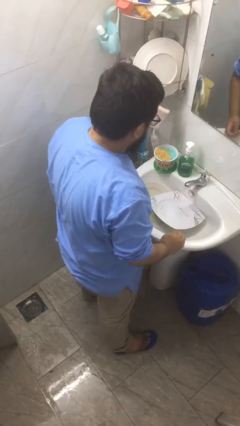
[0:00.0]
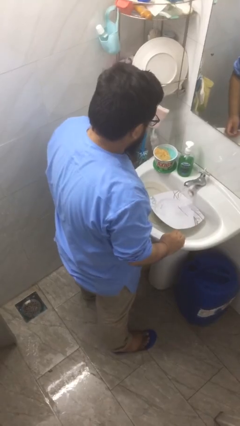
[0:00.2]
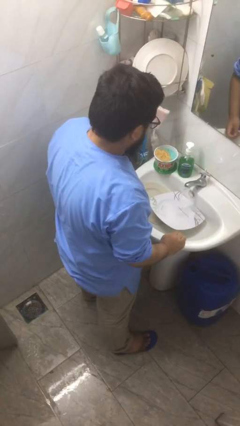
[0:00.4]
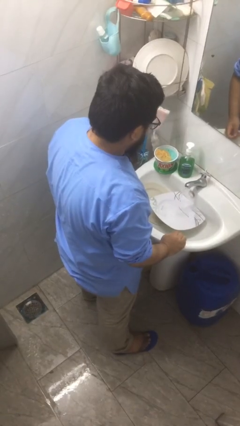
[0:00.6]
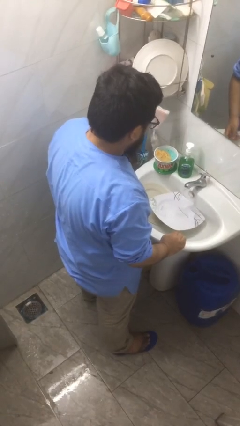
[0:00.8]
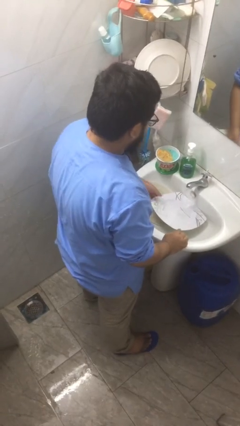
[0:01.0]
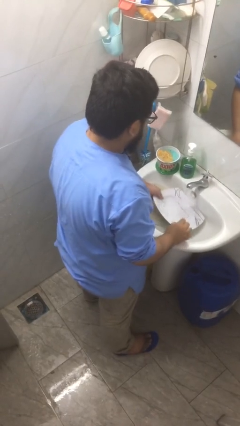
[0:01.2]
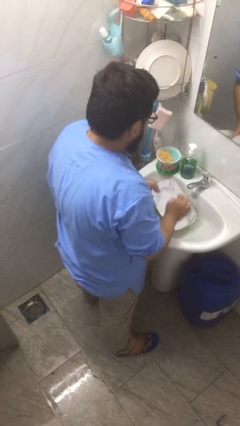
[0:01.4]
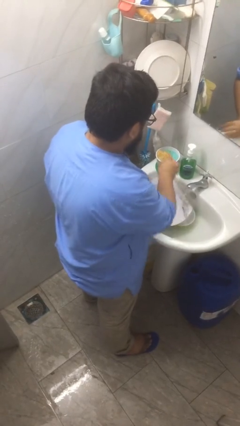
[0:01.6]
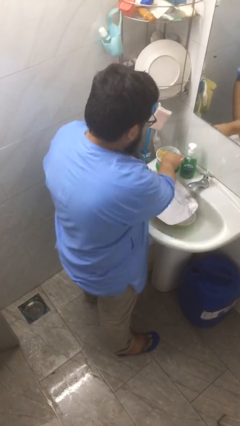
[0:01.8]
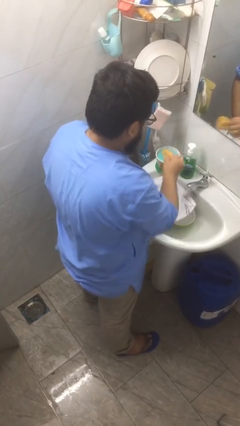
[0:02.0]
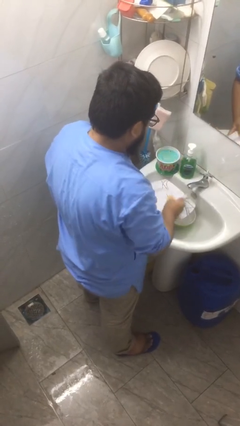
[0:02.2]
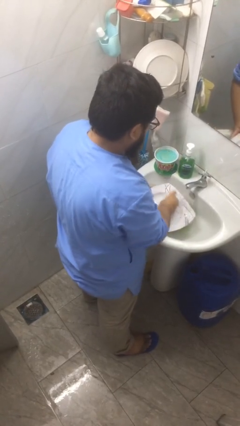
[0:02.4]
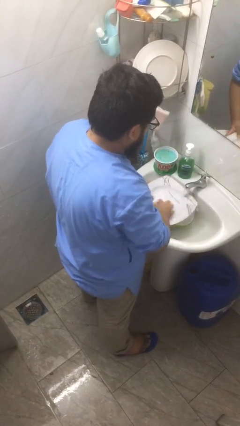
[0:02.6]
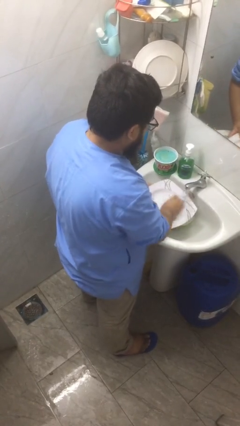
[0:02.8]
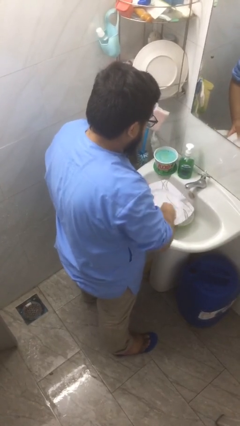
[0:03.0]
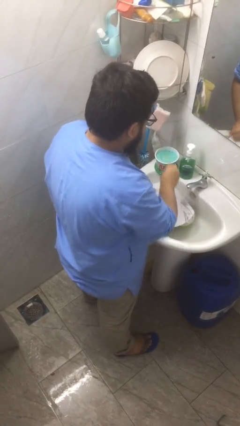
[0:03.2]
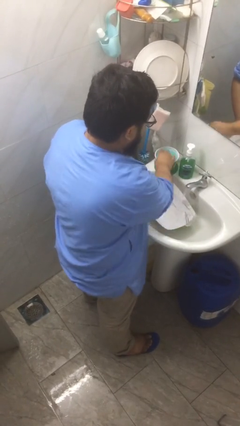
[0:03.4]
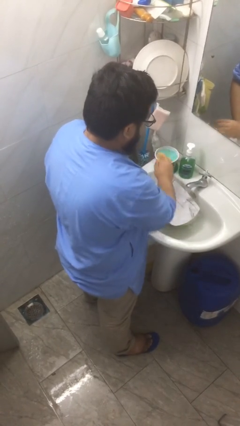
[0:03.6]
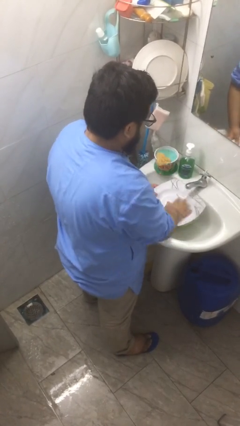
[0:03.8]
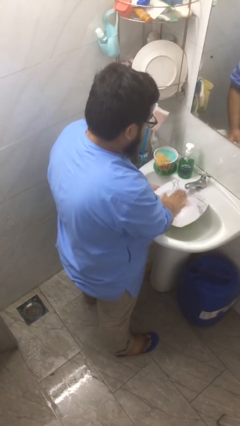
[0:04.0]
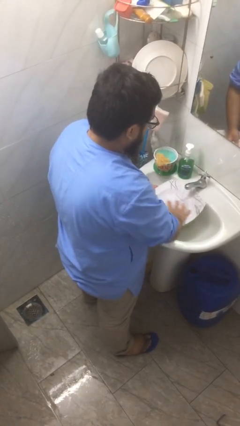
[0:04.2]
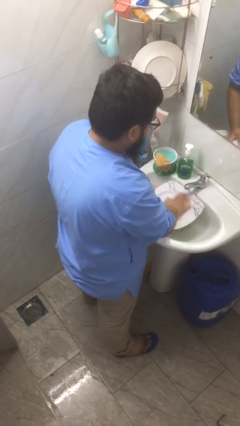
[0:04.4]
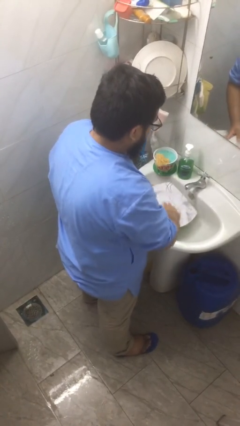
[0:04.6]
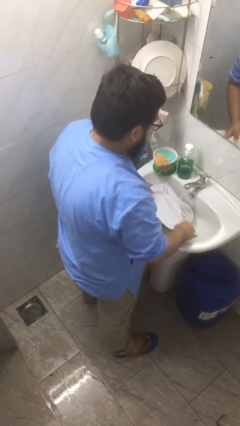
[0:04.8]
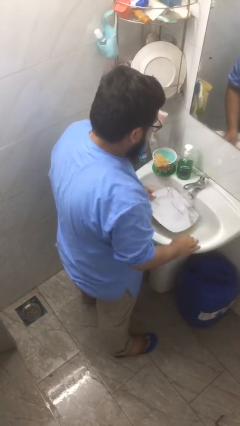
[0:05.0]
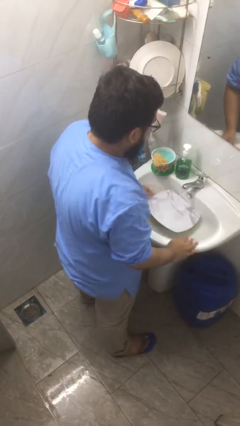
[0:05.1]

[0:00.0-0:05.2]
person washes dish

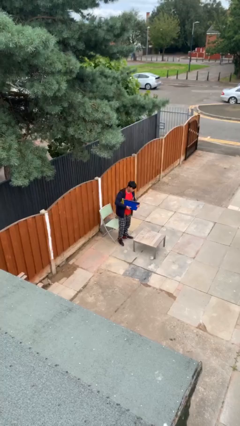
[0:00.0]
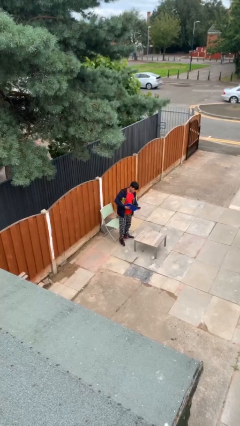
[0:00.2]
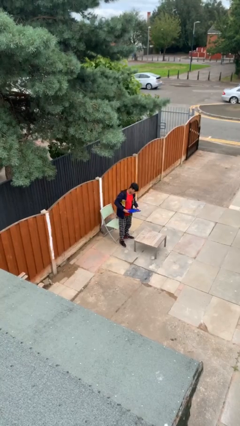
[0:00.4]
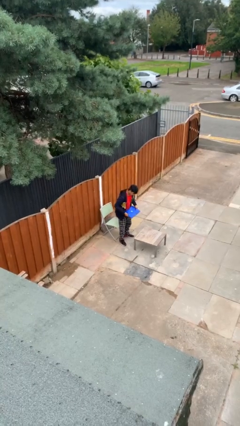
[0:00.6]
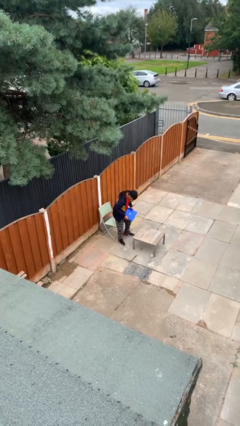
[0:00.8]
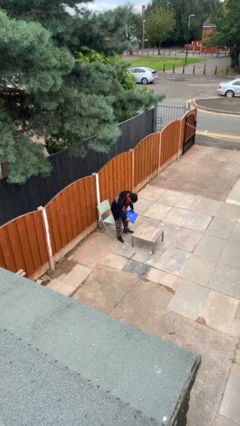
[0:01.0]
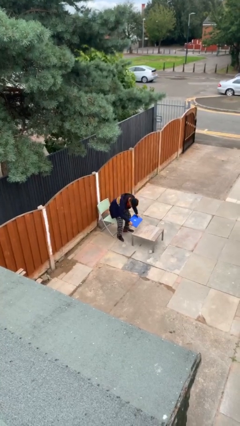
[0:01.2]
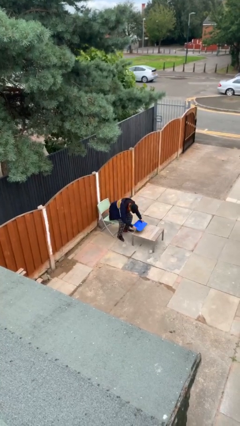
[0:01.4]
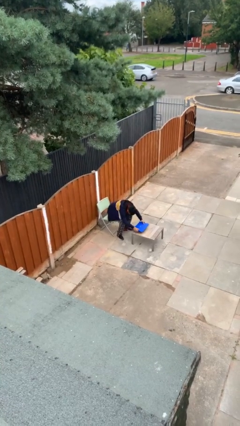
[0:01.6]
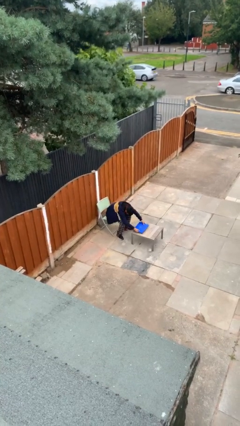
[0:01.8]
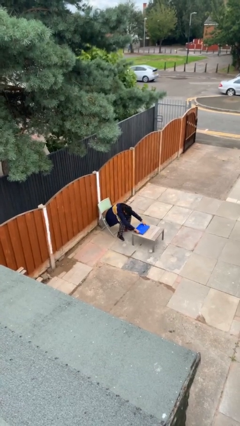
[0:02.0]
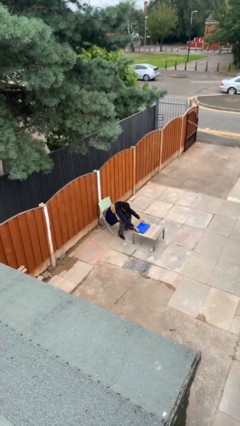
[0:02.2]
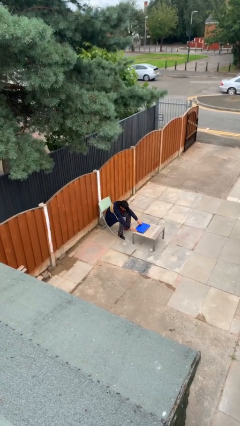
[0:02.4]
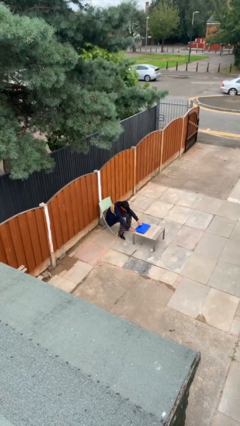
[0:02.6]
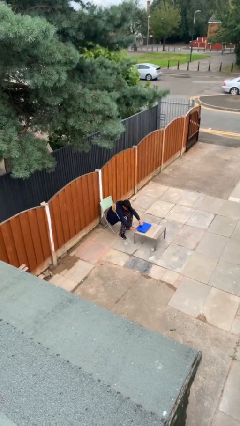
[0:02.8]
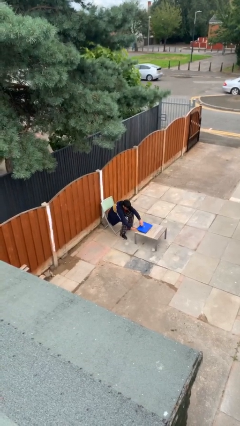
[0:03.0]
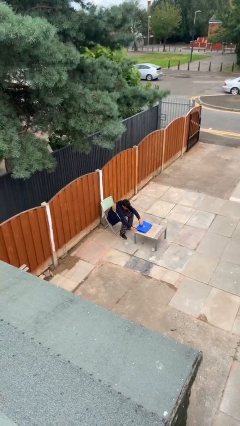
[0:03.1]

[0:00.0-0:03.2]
person sits down

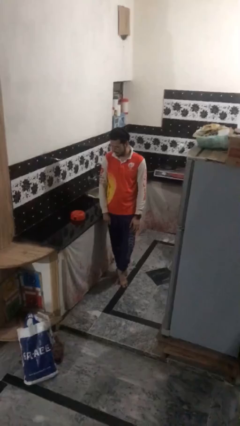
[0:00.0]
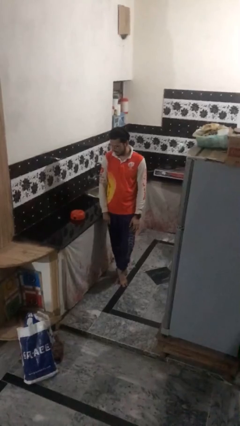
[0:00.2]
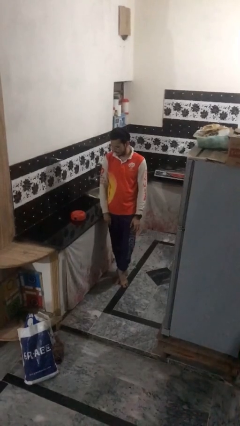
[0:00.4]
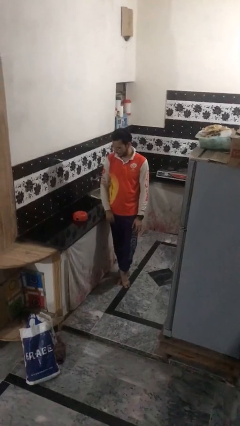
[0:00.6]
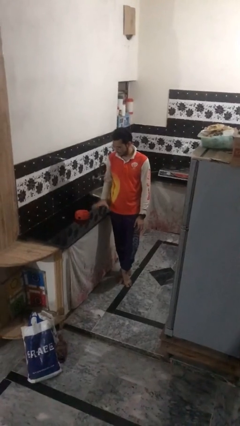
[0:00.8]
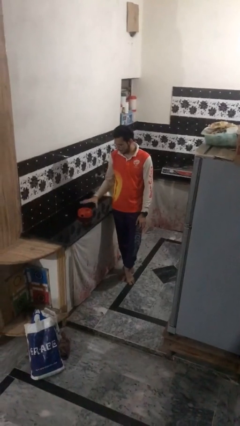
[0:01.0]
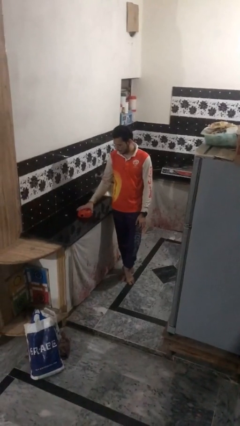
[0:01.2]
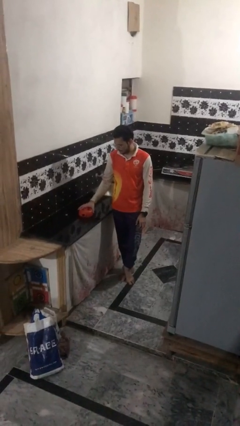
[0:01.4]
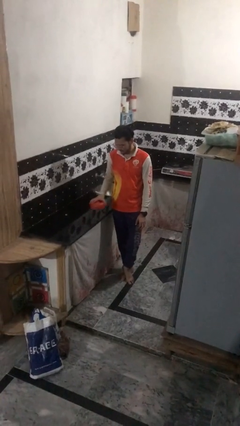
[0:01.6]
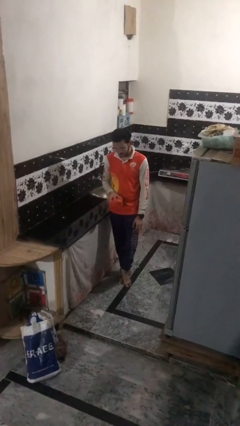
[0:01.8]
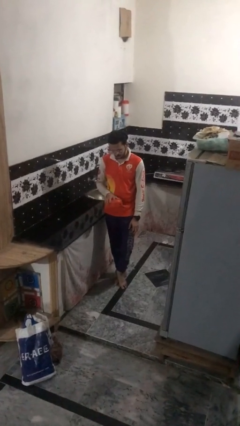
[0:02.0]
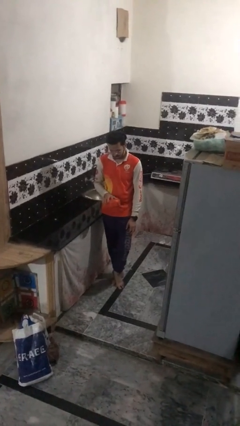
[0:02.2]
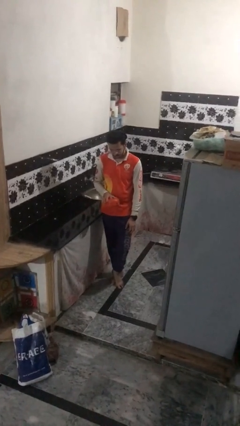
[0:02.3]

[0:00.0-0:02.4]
person picks up object from countertop

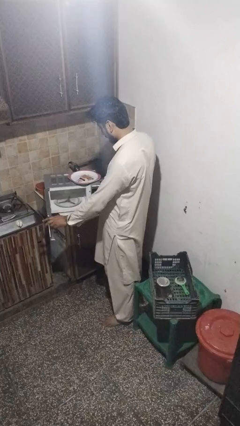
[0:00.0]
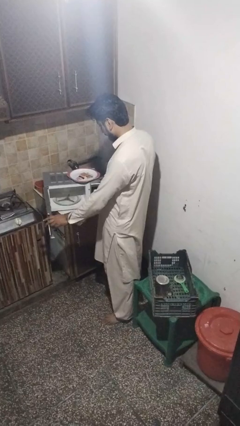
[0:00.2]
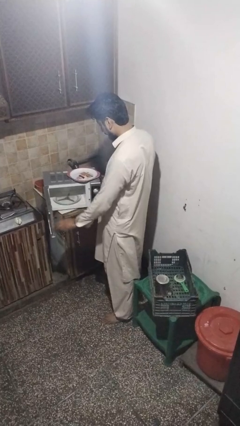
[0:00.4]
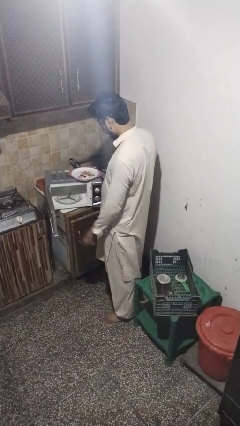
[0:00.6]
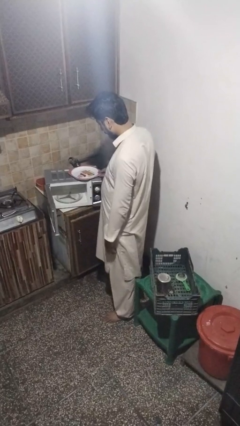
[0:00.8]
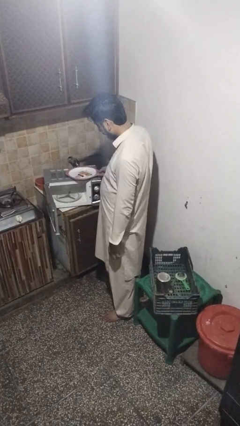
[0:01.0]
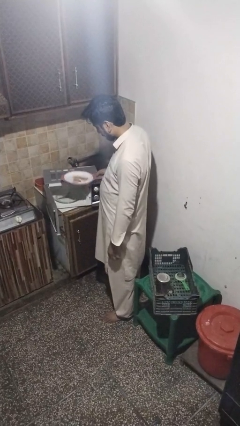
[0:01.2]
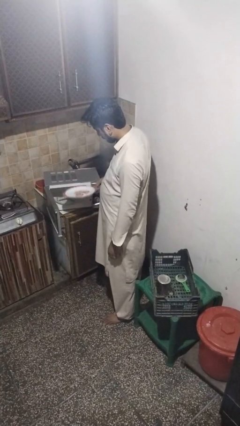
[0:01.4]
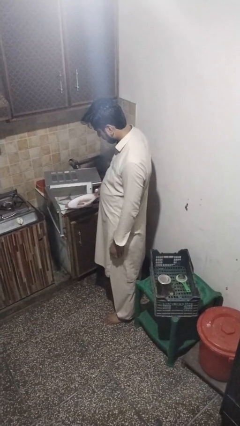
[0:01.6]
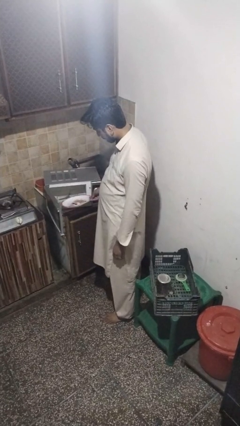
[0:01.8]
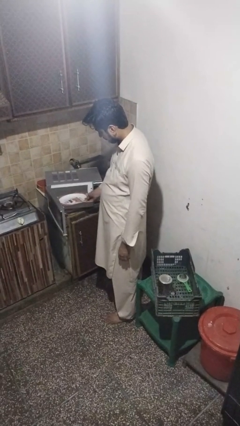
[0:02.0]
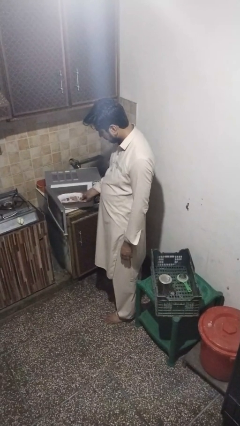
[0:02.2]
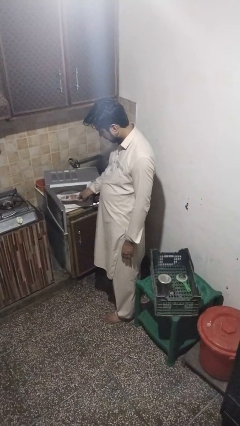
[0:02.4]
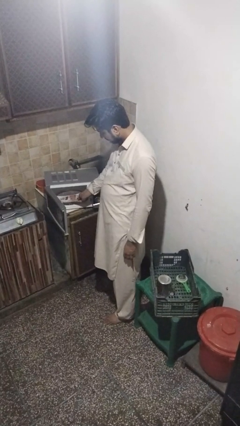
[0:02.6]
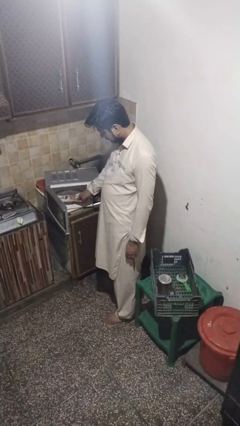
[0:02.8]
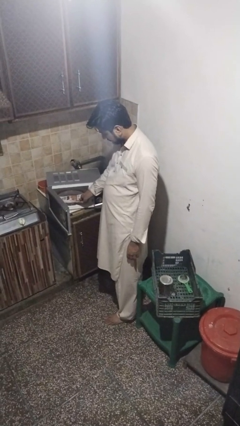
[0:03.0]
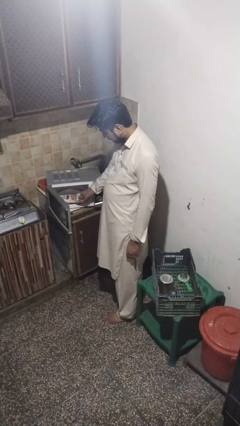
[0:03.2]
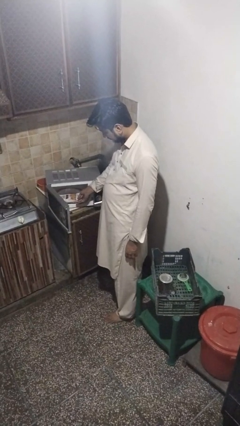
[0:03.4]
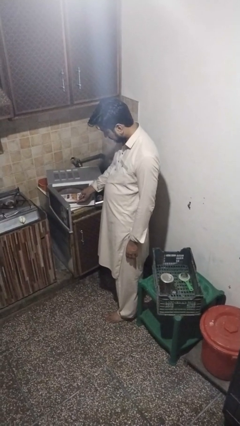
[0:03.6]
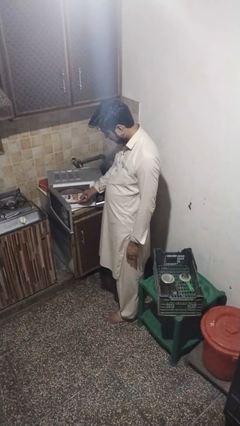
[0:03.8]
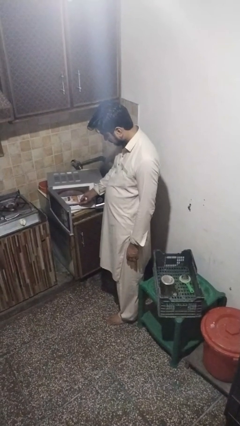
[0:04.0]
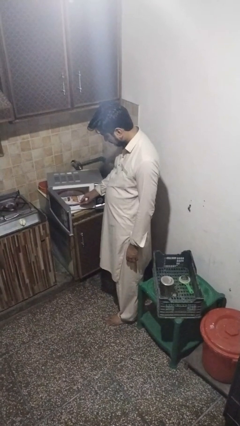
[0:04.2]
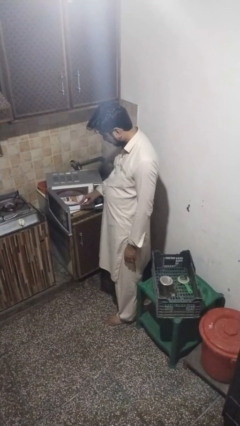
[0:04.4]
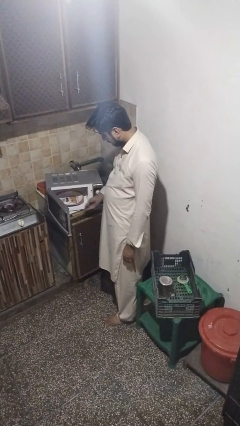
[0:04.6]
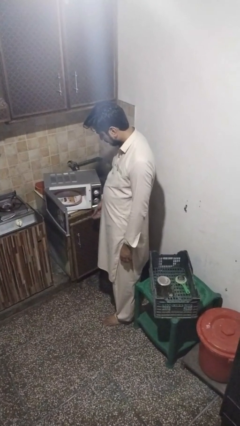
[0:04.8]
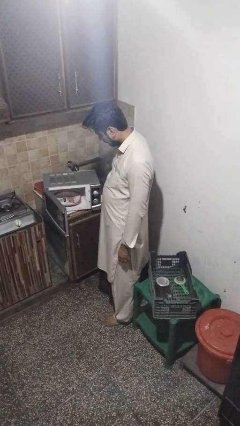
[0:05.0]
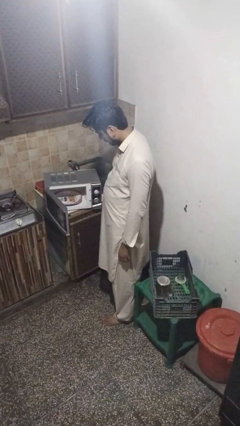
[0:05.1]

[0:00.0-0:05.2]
person puts object into microwave

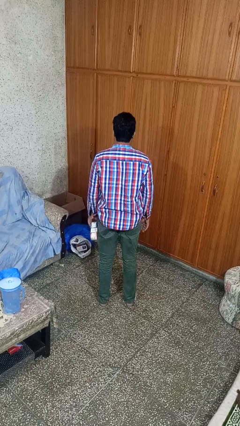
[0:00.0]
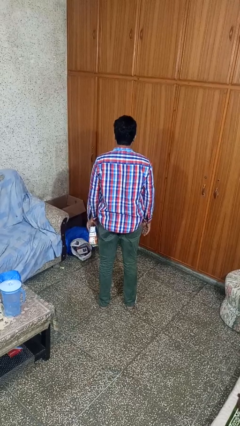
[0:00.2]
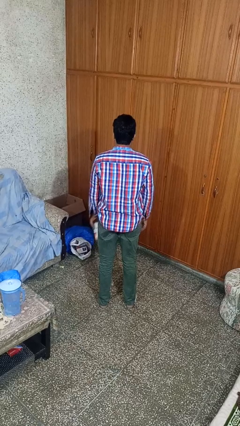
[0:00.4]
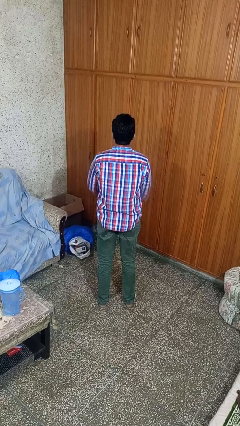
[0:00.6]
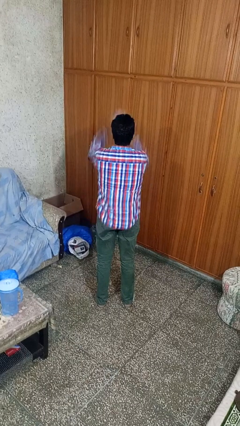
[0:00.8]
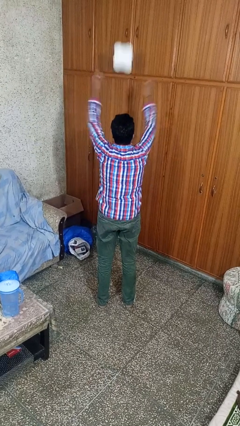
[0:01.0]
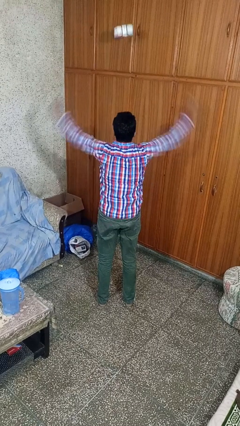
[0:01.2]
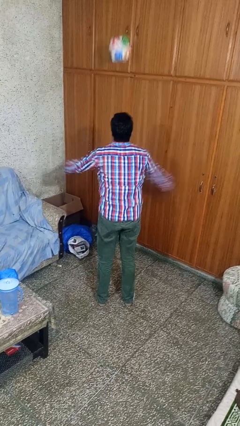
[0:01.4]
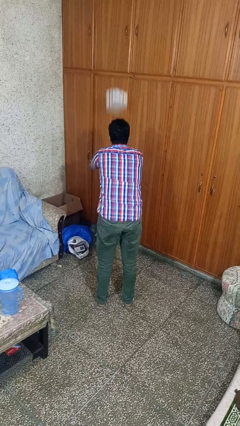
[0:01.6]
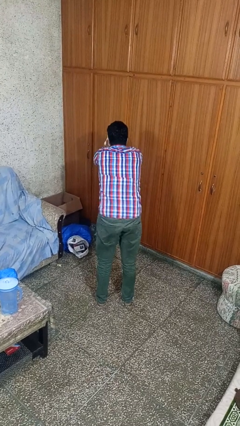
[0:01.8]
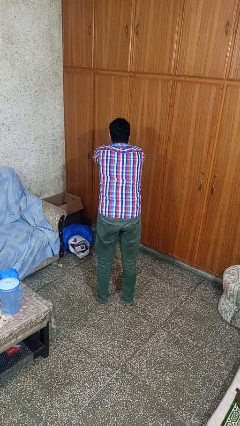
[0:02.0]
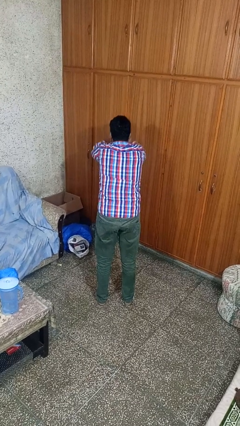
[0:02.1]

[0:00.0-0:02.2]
person drops object
